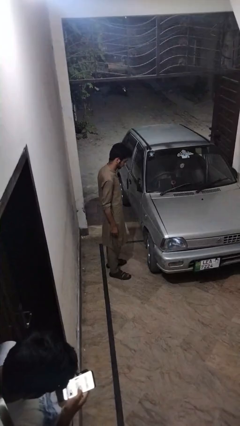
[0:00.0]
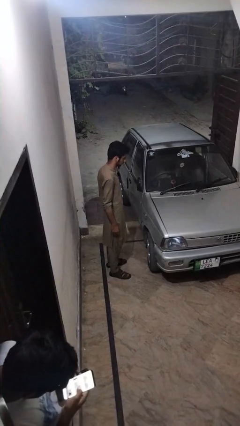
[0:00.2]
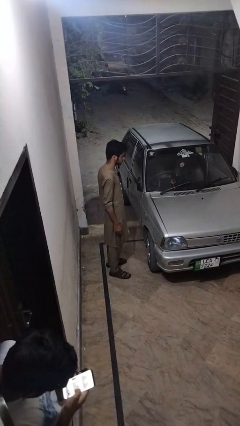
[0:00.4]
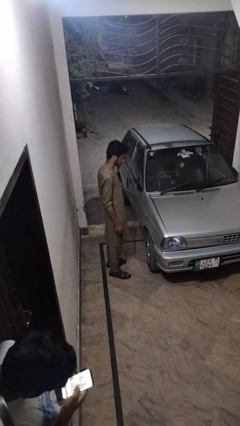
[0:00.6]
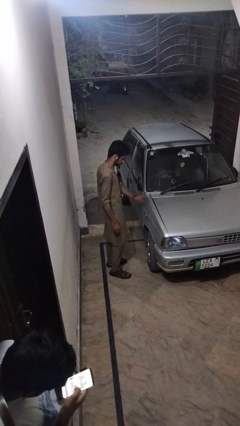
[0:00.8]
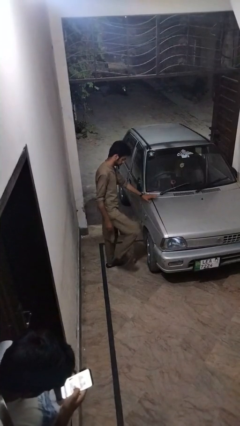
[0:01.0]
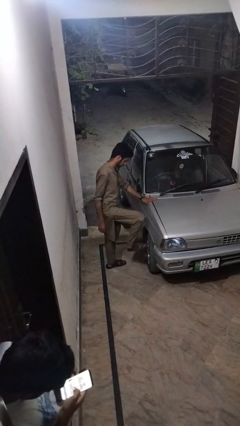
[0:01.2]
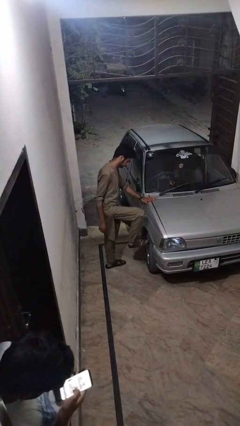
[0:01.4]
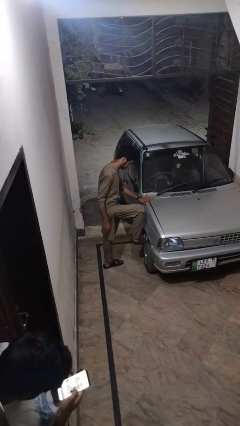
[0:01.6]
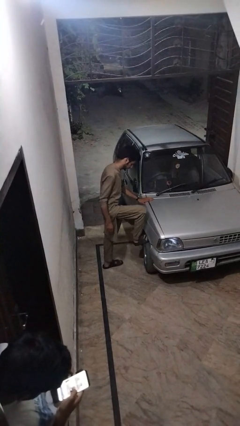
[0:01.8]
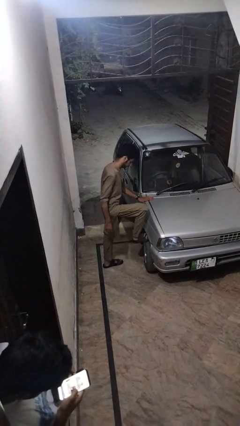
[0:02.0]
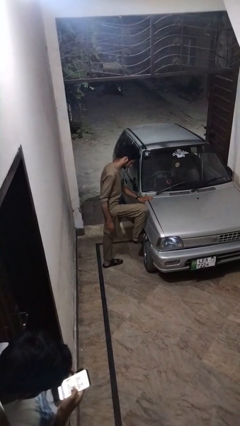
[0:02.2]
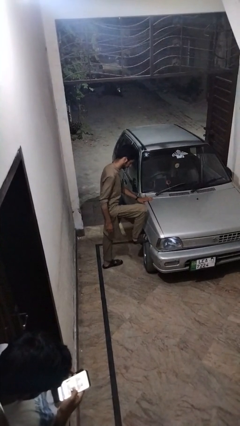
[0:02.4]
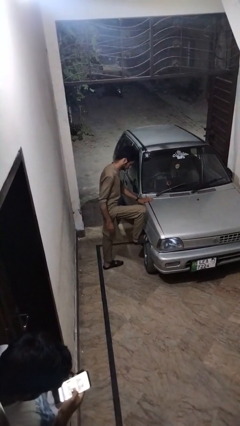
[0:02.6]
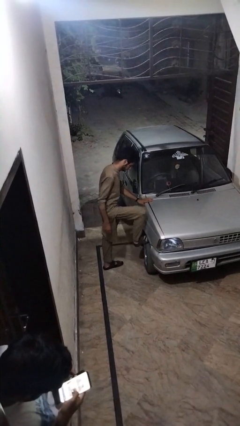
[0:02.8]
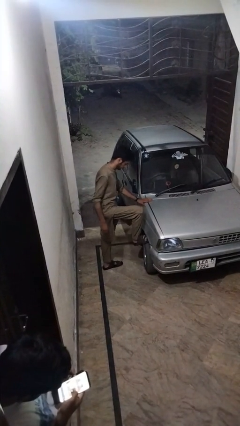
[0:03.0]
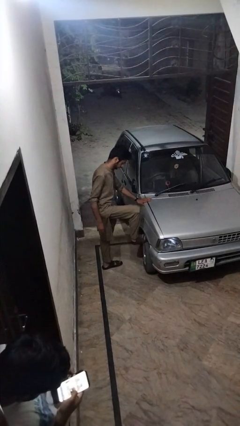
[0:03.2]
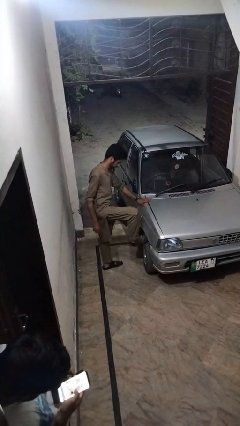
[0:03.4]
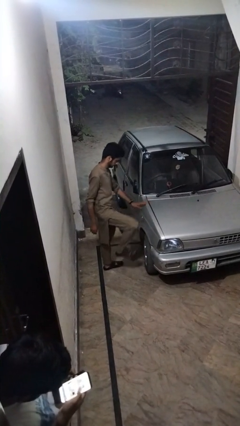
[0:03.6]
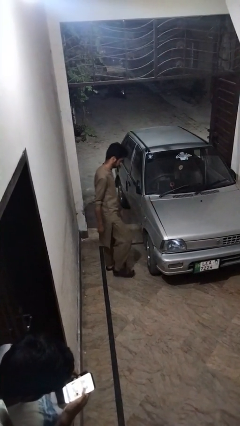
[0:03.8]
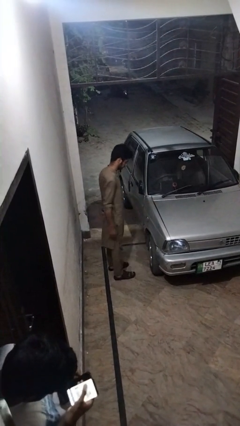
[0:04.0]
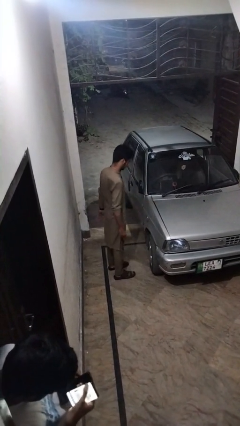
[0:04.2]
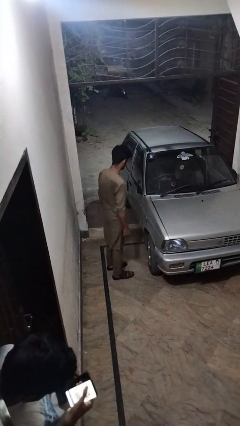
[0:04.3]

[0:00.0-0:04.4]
person kicks car tires

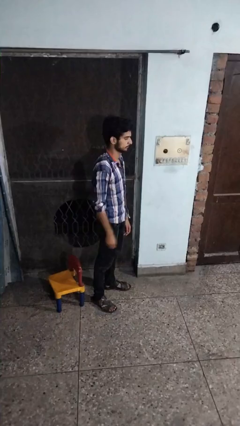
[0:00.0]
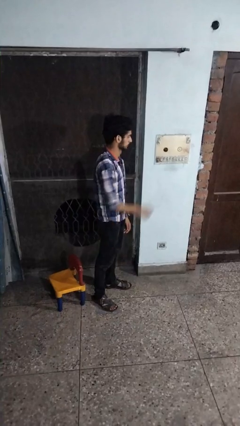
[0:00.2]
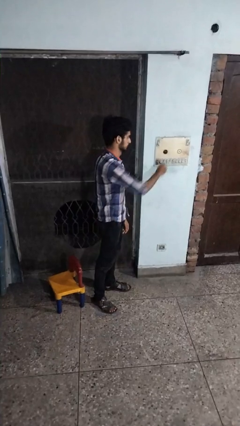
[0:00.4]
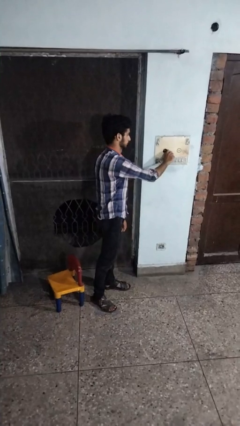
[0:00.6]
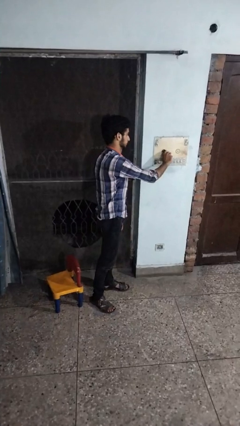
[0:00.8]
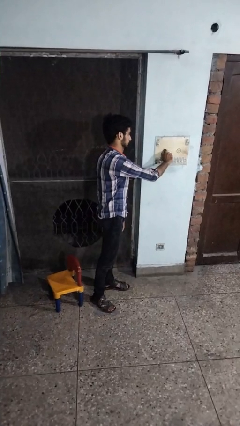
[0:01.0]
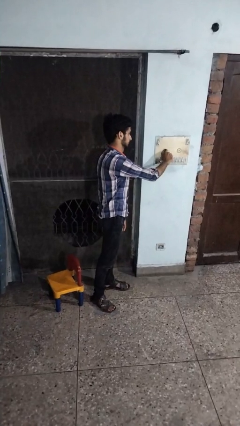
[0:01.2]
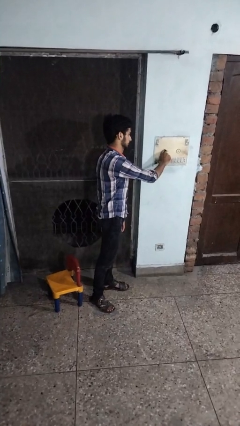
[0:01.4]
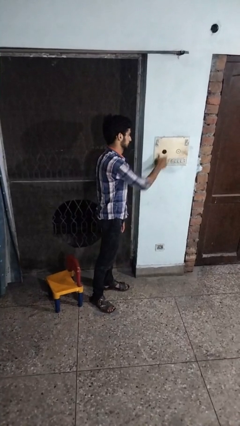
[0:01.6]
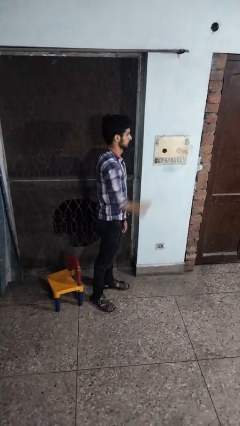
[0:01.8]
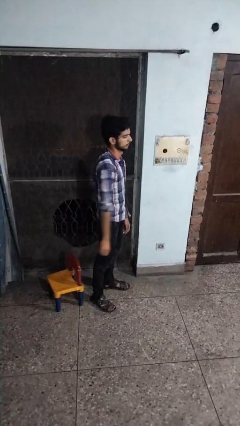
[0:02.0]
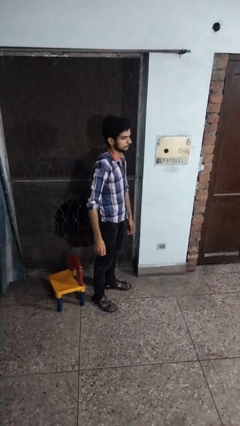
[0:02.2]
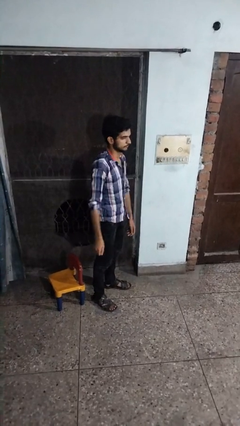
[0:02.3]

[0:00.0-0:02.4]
person adjusts thermostat

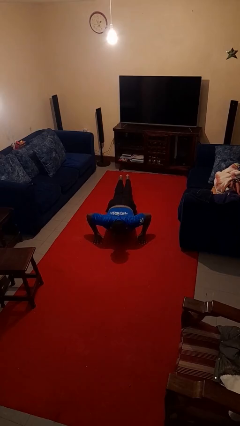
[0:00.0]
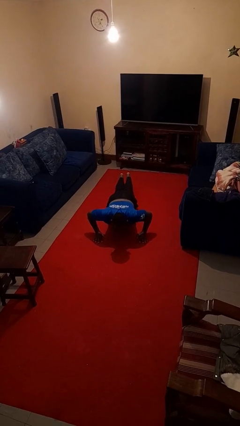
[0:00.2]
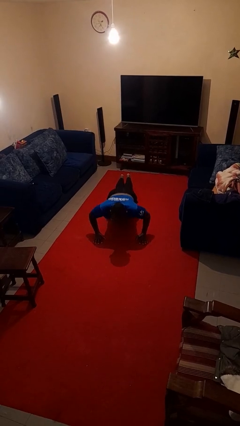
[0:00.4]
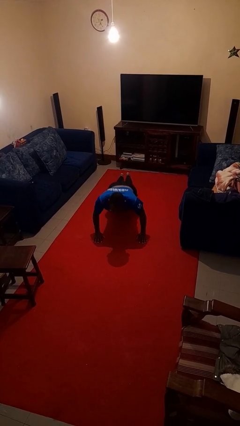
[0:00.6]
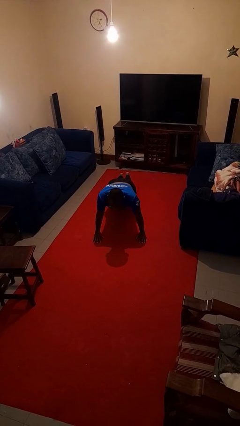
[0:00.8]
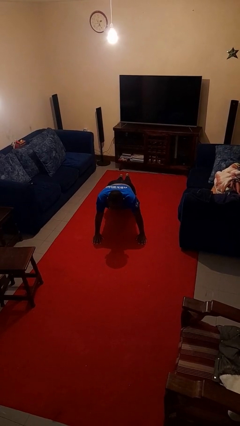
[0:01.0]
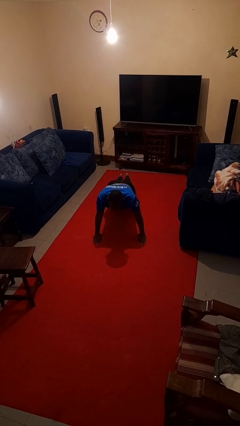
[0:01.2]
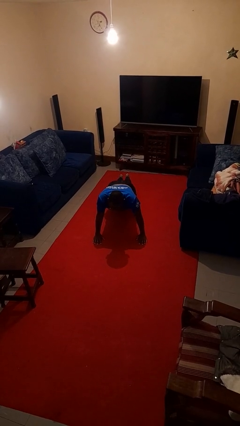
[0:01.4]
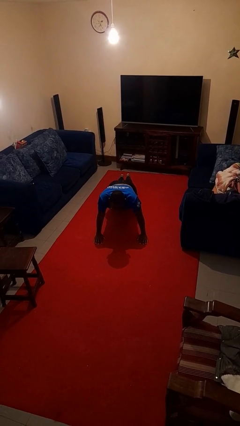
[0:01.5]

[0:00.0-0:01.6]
person exercises with pushup

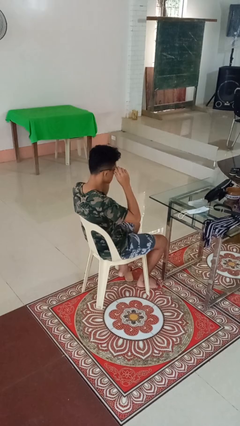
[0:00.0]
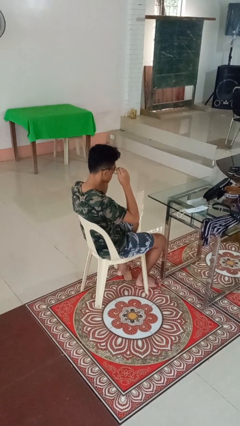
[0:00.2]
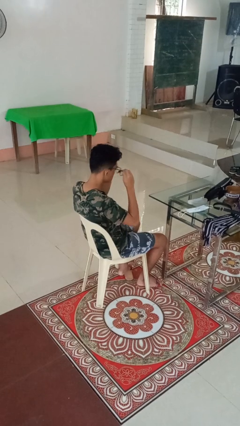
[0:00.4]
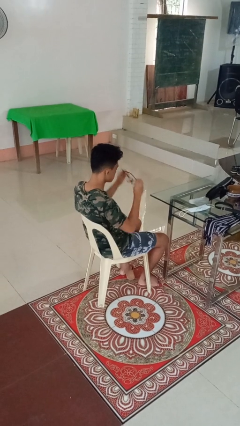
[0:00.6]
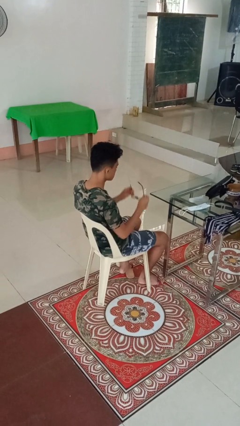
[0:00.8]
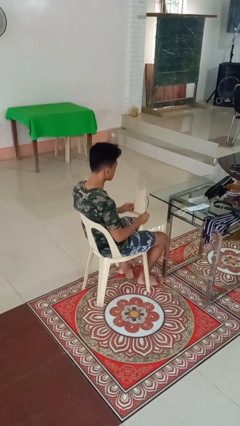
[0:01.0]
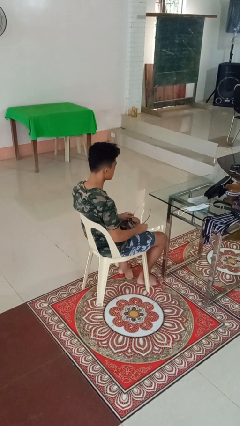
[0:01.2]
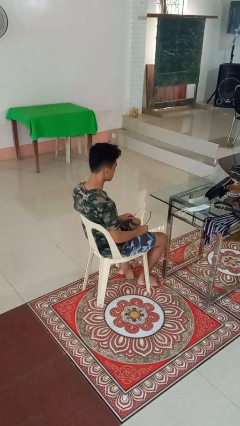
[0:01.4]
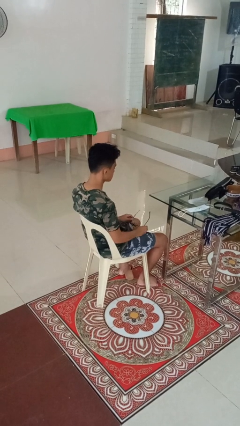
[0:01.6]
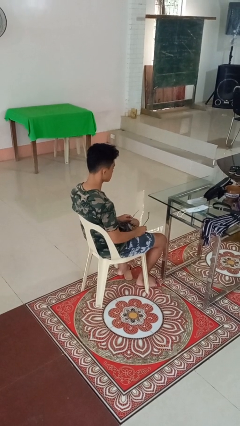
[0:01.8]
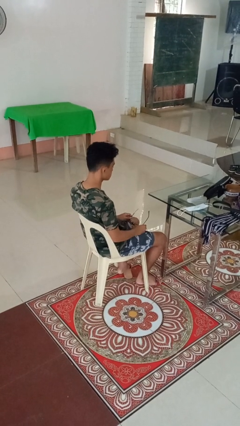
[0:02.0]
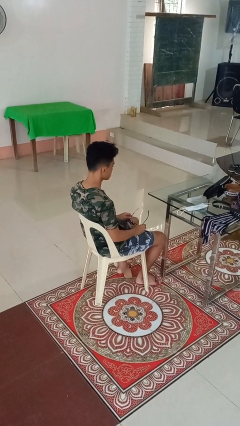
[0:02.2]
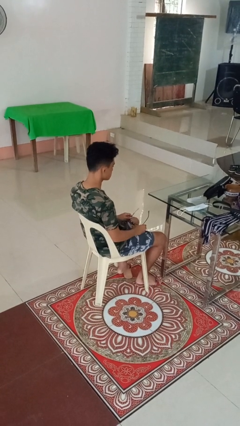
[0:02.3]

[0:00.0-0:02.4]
person takes off glasses

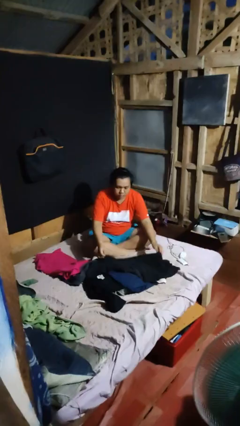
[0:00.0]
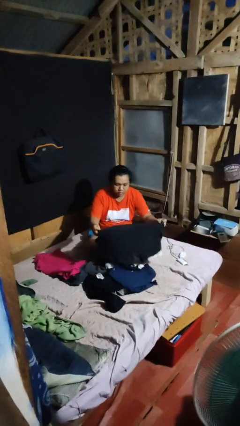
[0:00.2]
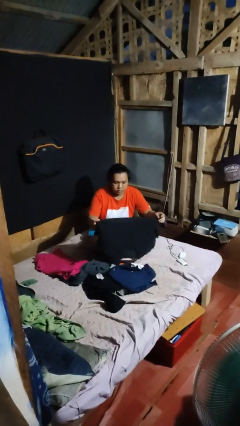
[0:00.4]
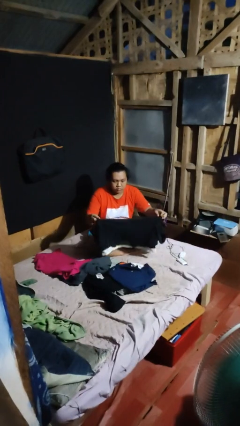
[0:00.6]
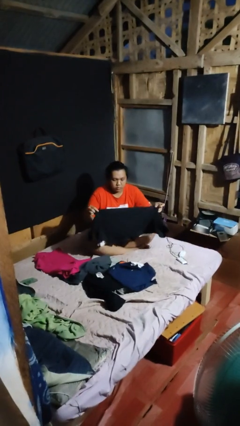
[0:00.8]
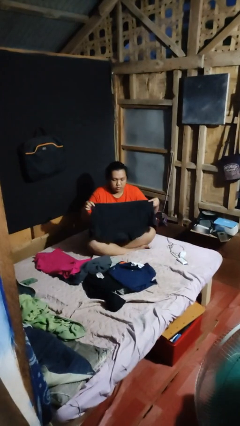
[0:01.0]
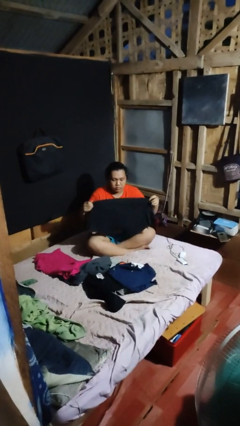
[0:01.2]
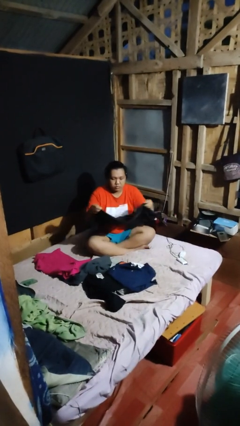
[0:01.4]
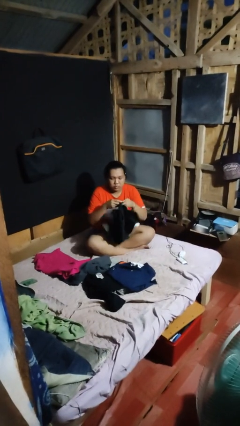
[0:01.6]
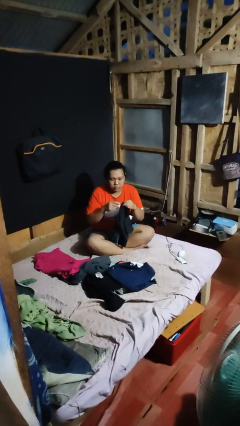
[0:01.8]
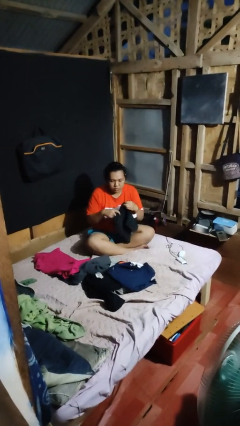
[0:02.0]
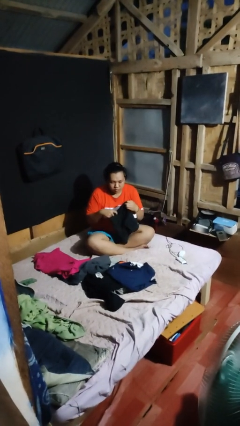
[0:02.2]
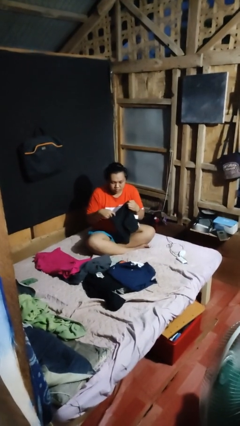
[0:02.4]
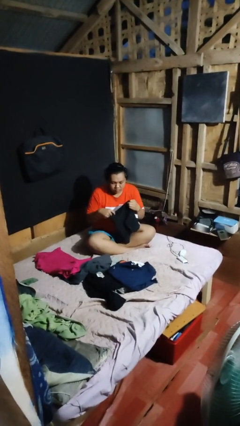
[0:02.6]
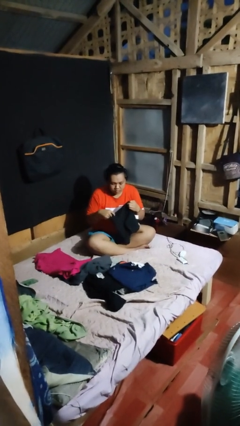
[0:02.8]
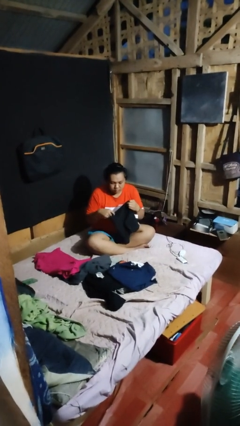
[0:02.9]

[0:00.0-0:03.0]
person folds shirt

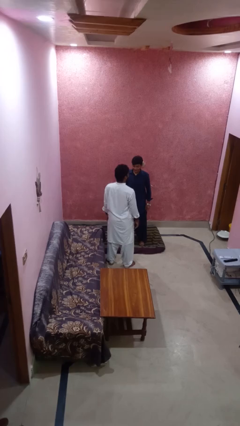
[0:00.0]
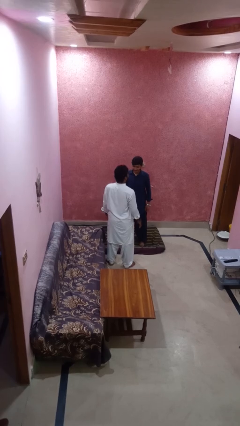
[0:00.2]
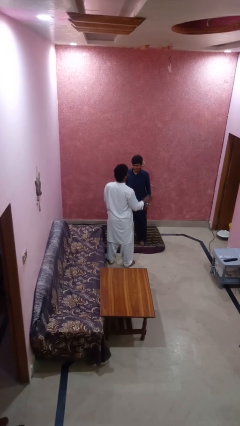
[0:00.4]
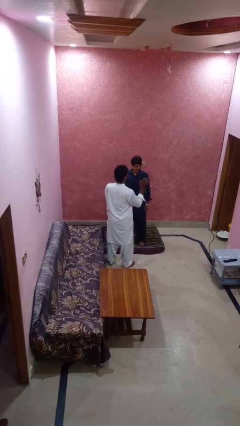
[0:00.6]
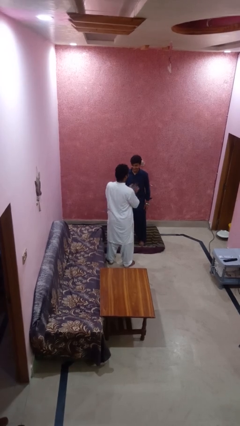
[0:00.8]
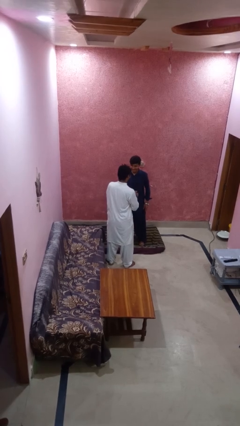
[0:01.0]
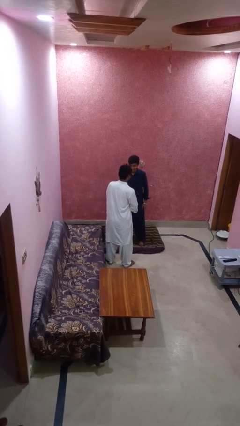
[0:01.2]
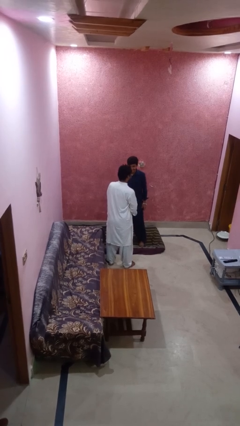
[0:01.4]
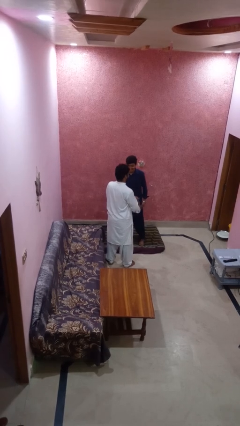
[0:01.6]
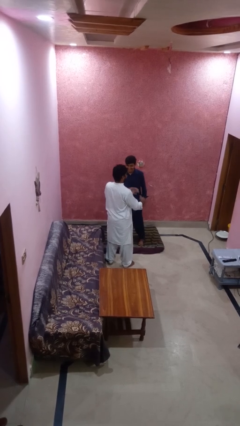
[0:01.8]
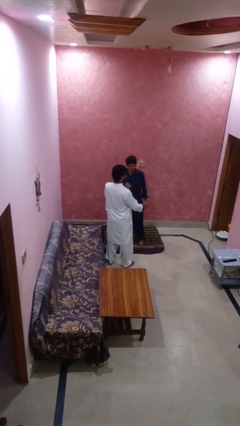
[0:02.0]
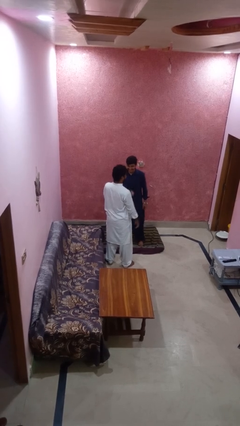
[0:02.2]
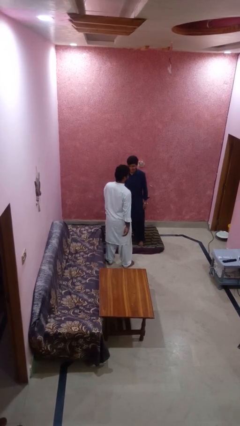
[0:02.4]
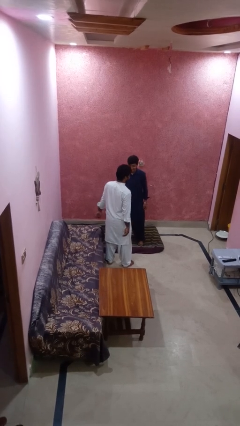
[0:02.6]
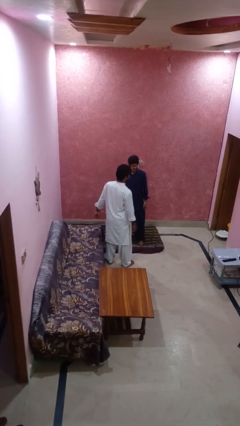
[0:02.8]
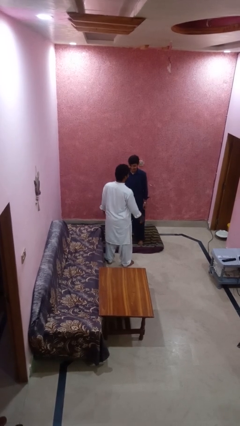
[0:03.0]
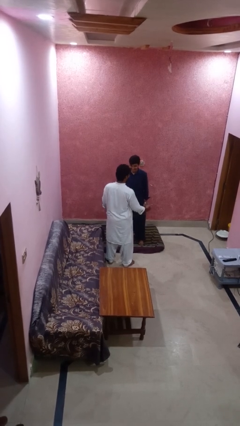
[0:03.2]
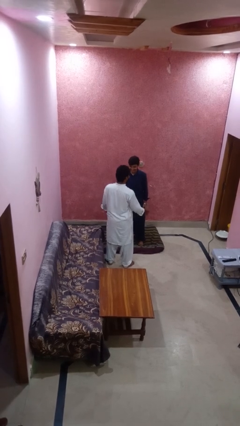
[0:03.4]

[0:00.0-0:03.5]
person laughs with person
